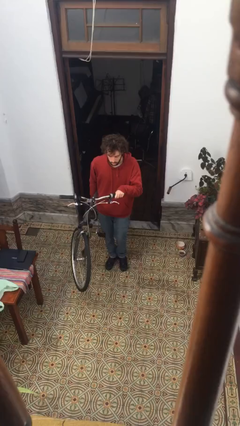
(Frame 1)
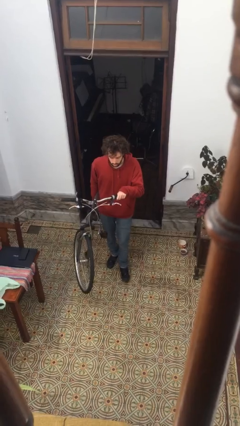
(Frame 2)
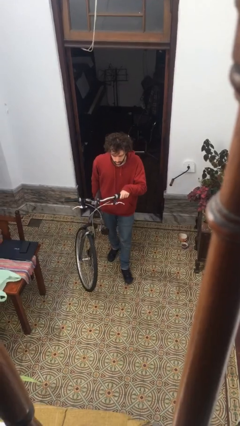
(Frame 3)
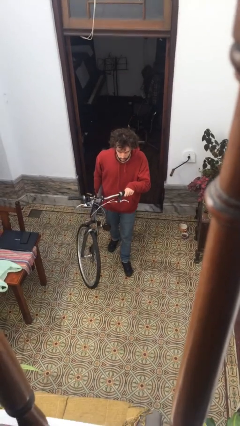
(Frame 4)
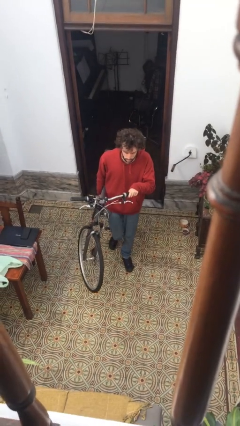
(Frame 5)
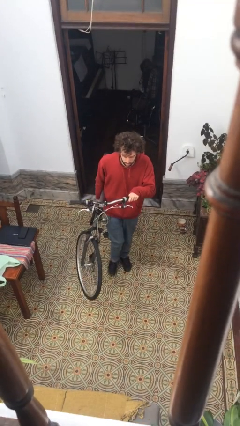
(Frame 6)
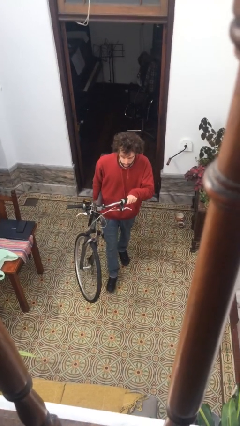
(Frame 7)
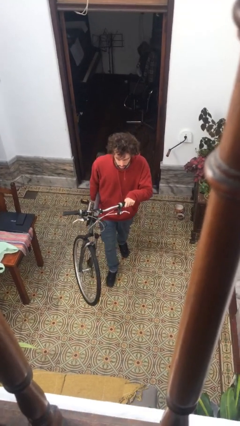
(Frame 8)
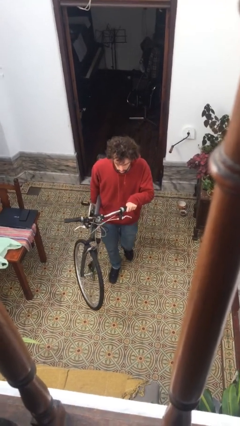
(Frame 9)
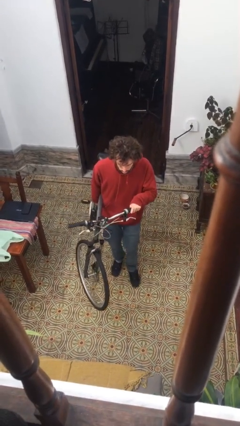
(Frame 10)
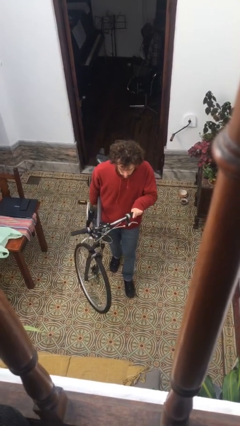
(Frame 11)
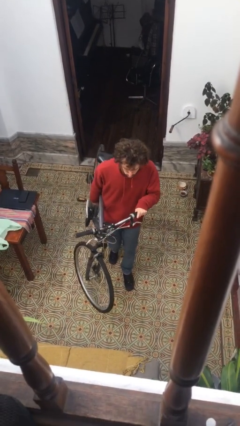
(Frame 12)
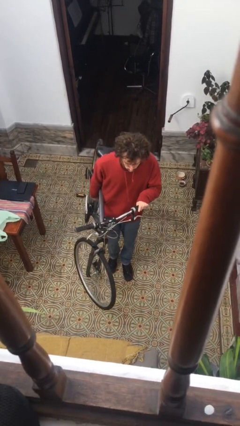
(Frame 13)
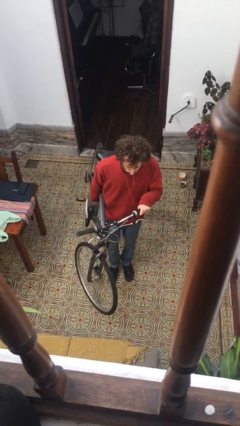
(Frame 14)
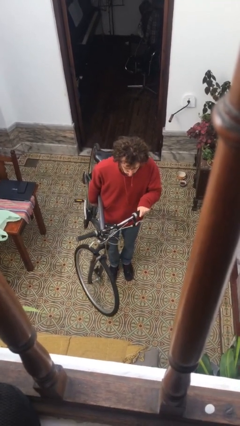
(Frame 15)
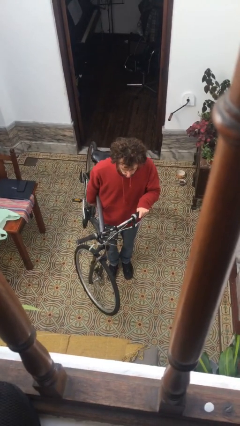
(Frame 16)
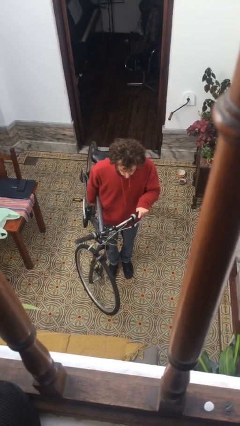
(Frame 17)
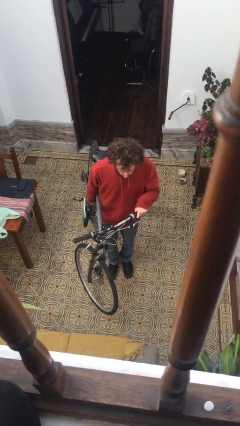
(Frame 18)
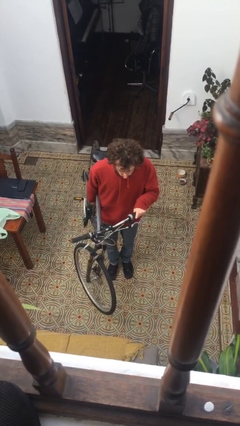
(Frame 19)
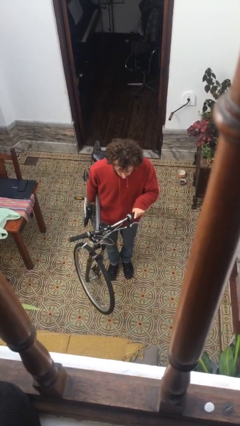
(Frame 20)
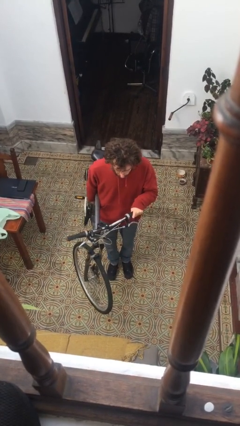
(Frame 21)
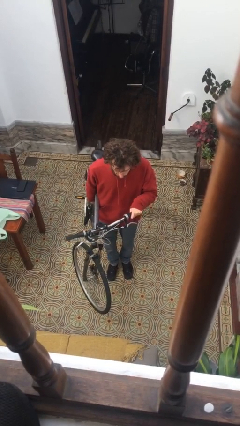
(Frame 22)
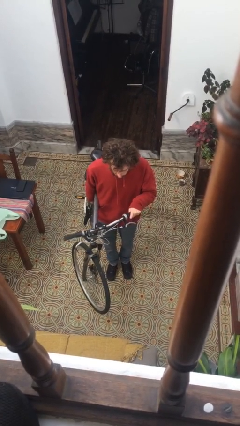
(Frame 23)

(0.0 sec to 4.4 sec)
person carries bicycle

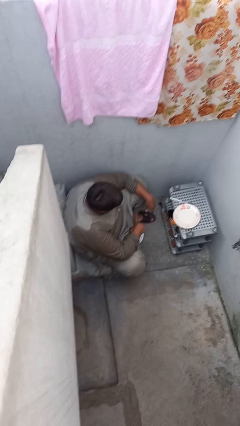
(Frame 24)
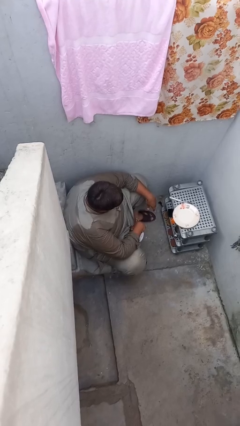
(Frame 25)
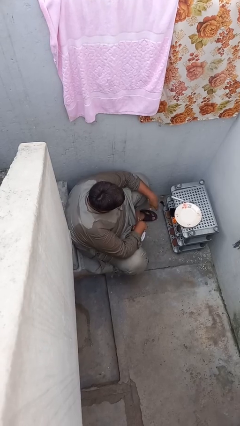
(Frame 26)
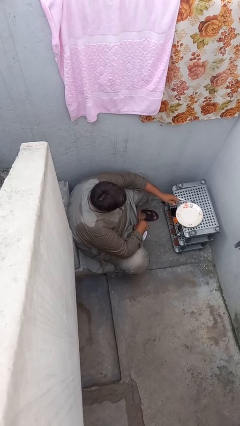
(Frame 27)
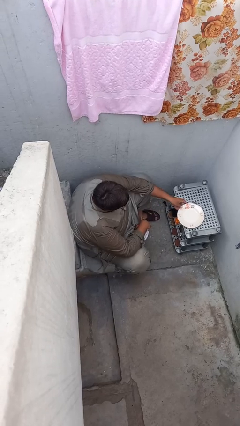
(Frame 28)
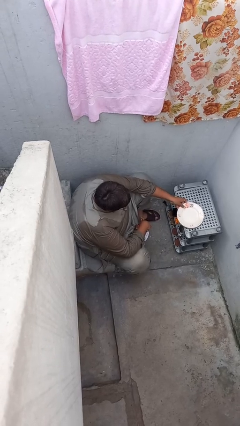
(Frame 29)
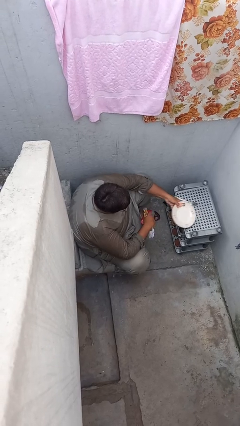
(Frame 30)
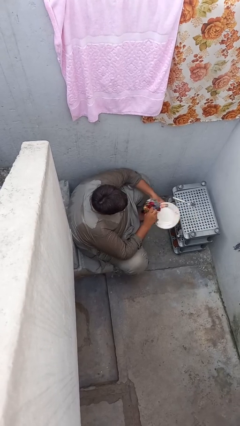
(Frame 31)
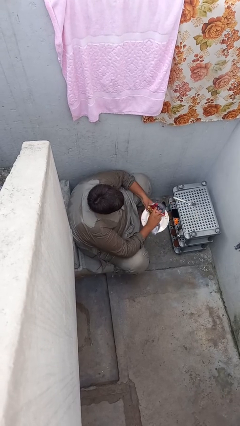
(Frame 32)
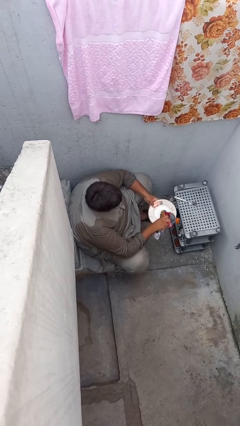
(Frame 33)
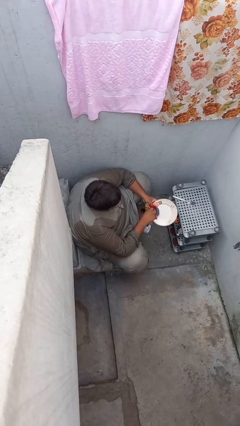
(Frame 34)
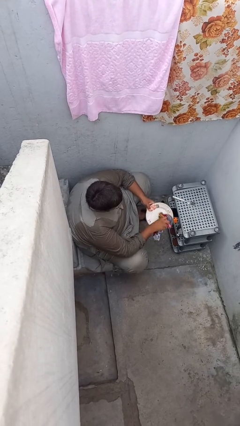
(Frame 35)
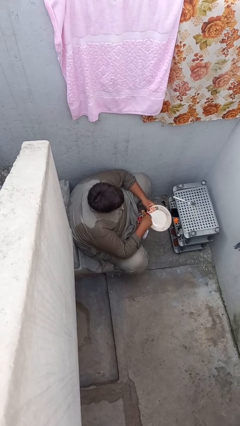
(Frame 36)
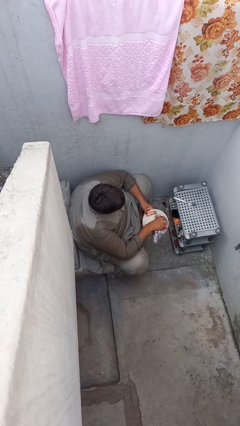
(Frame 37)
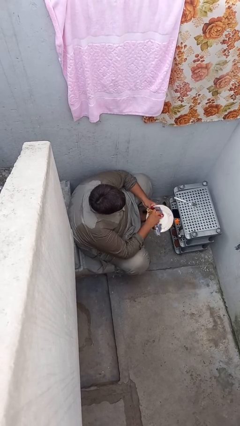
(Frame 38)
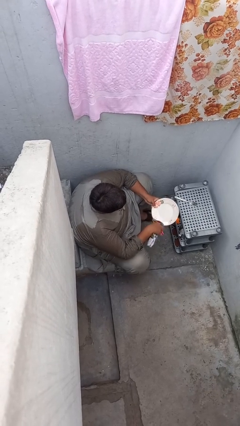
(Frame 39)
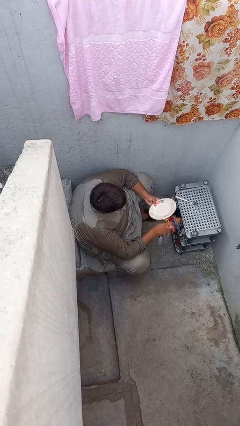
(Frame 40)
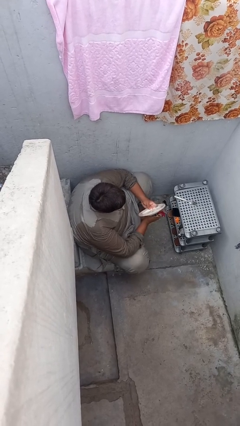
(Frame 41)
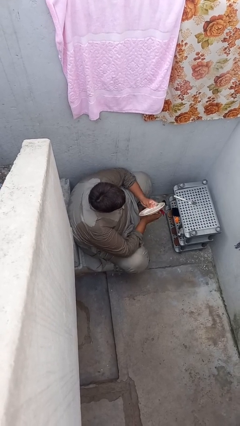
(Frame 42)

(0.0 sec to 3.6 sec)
person dries dish

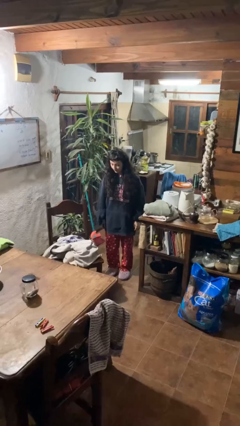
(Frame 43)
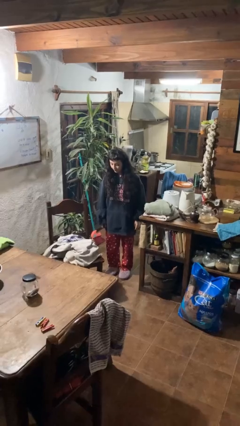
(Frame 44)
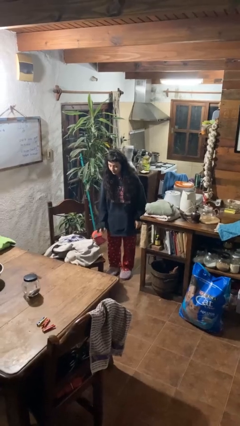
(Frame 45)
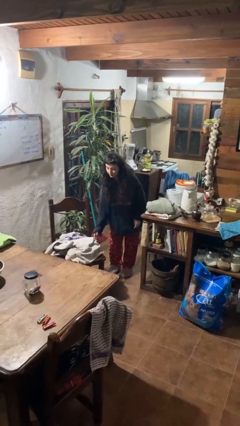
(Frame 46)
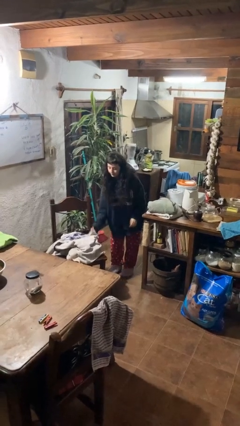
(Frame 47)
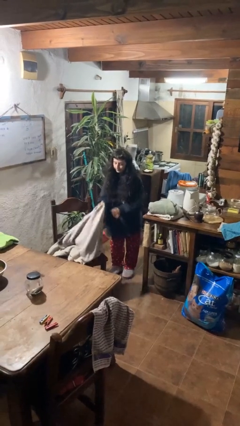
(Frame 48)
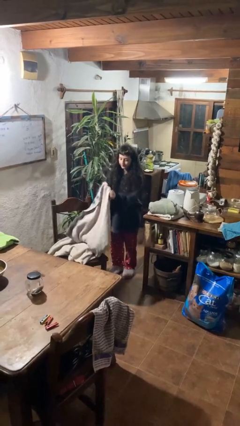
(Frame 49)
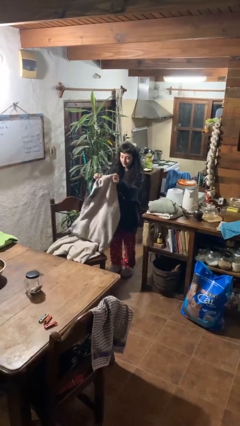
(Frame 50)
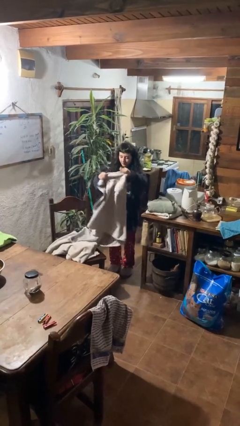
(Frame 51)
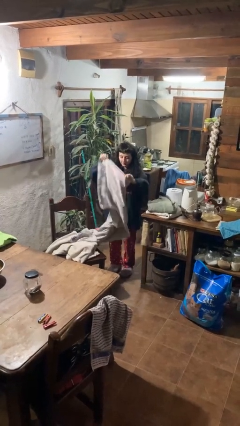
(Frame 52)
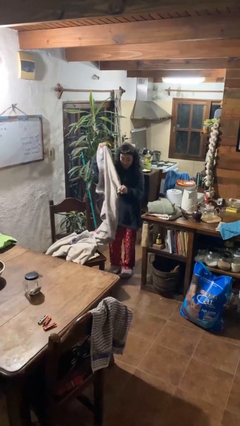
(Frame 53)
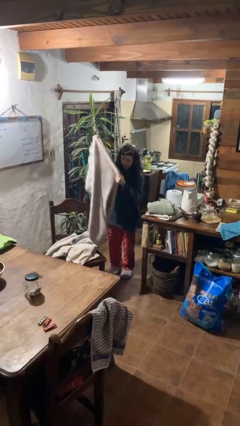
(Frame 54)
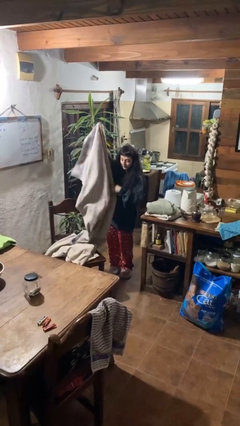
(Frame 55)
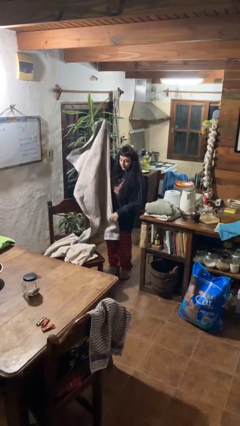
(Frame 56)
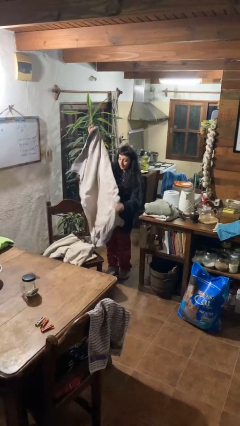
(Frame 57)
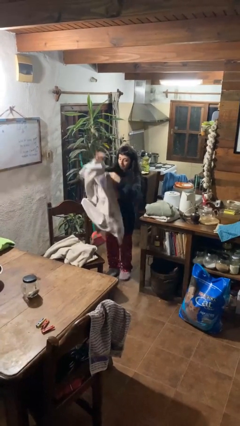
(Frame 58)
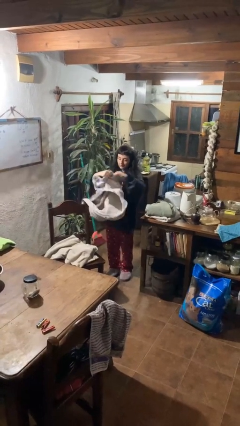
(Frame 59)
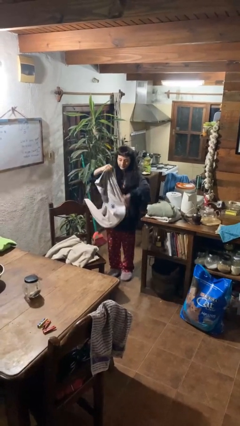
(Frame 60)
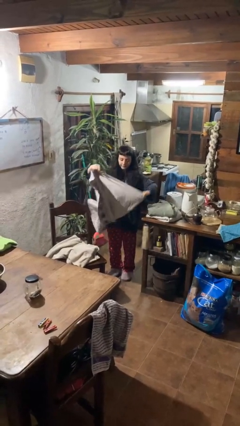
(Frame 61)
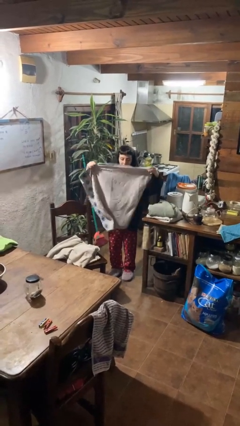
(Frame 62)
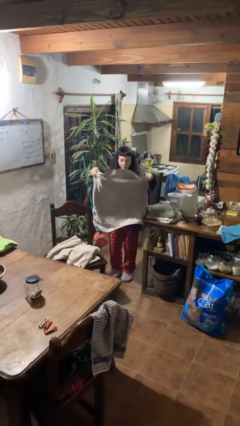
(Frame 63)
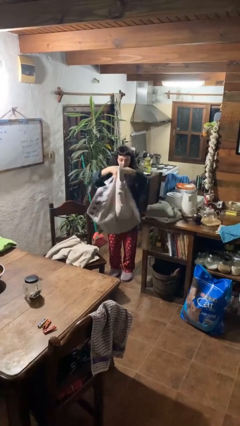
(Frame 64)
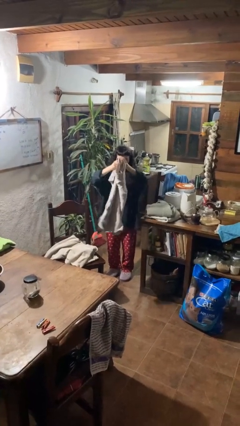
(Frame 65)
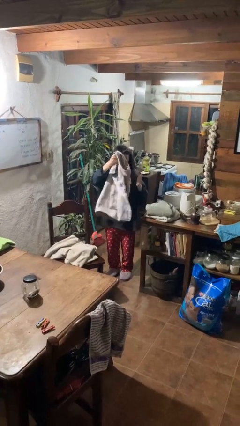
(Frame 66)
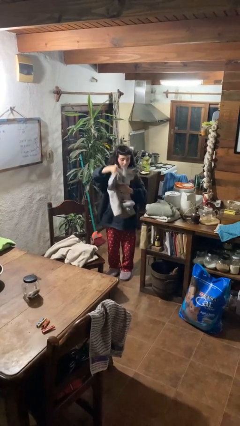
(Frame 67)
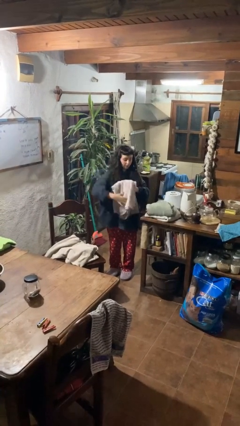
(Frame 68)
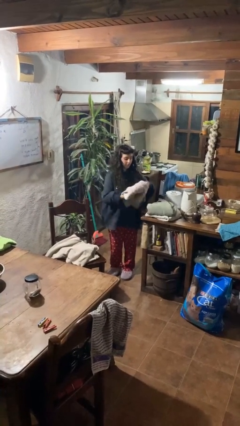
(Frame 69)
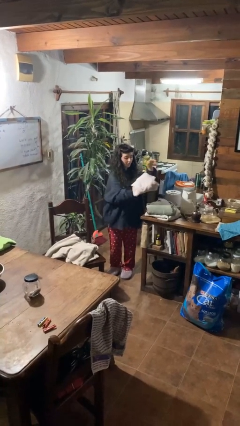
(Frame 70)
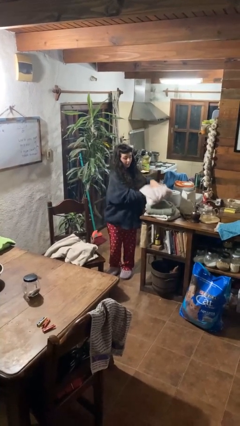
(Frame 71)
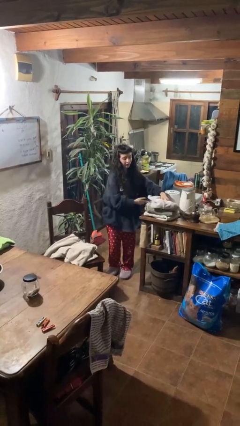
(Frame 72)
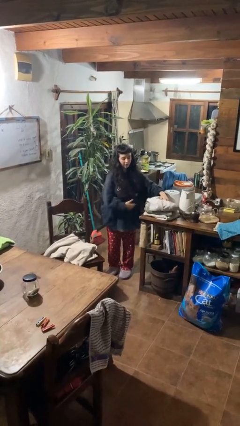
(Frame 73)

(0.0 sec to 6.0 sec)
person folds towel

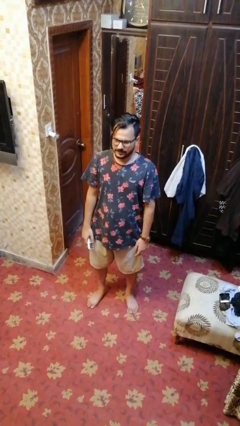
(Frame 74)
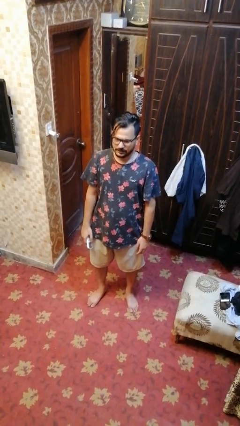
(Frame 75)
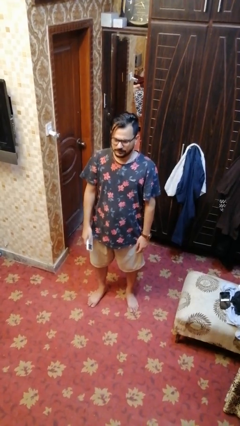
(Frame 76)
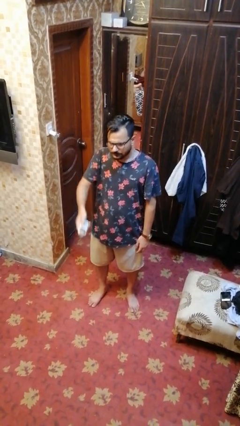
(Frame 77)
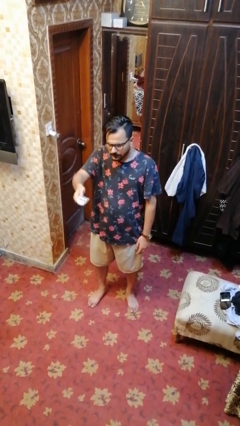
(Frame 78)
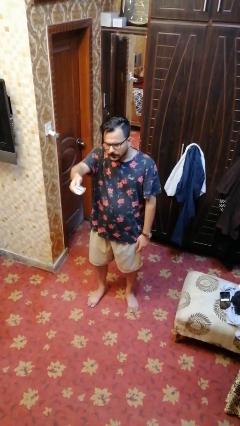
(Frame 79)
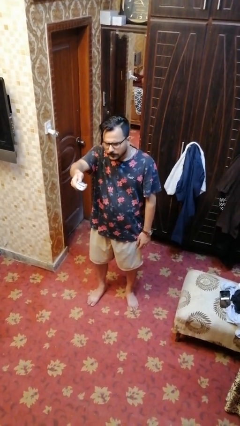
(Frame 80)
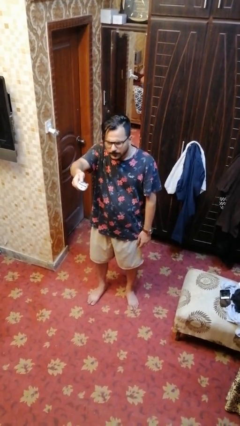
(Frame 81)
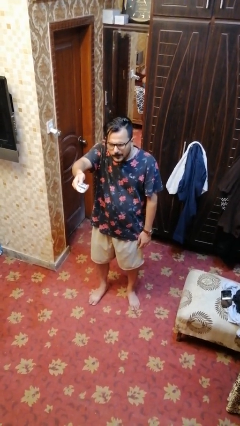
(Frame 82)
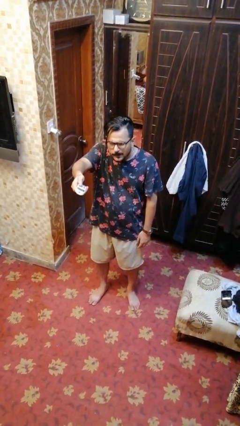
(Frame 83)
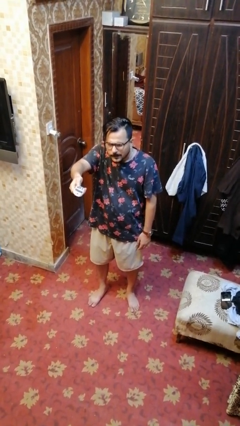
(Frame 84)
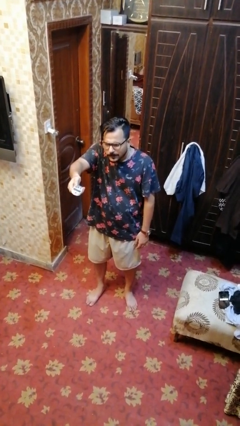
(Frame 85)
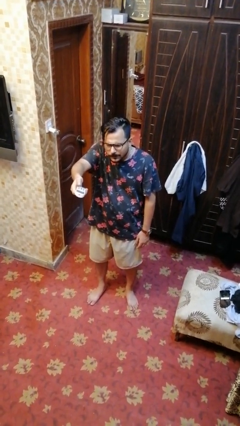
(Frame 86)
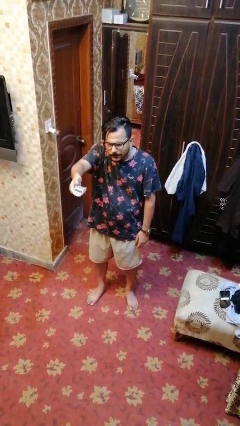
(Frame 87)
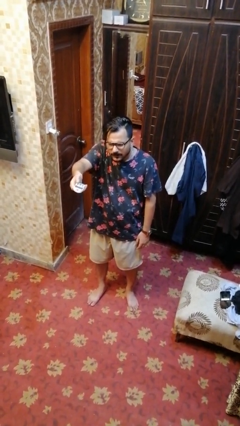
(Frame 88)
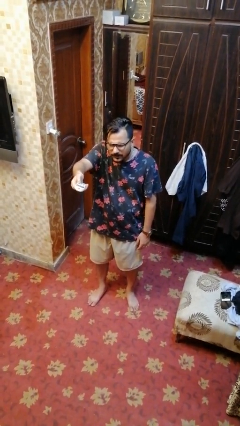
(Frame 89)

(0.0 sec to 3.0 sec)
person uses television remote

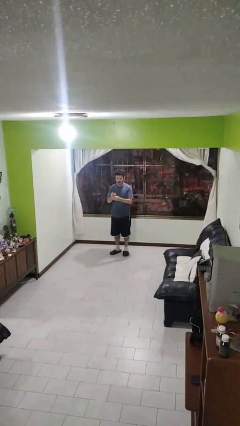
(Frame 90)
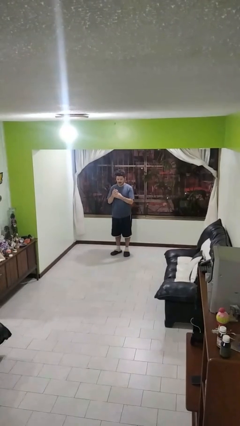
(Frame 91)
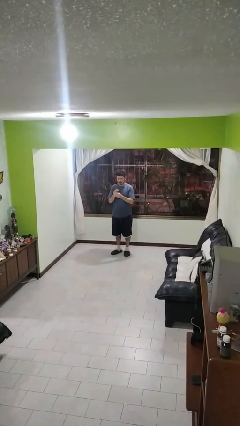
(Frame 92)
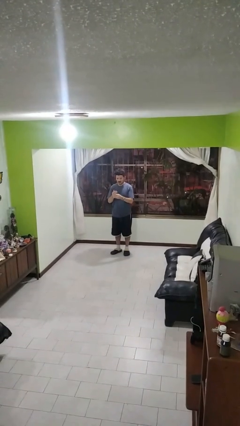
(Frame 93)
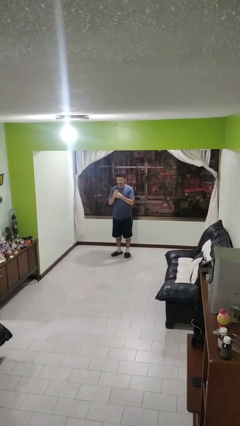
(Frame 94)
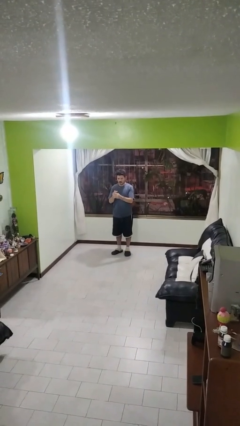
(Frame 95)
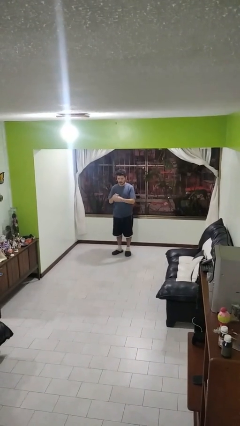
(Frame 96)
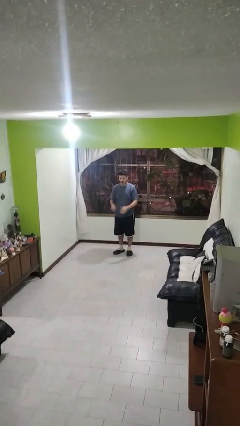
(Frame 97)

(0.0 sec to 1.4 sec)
person snaps fingers
